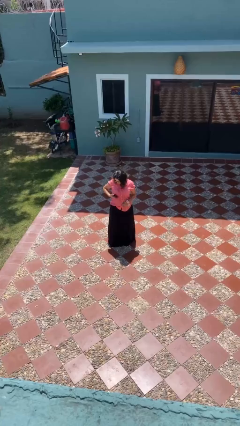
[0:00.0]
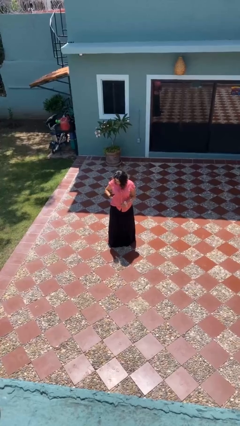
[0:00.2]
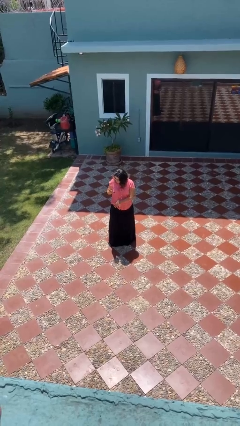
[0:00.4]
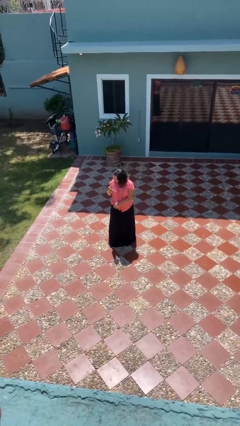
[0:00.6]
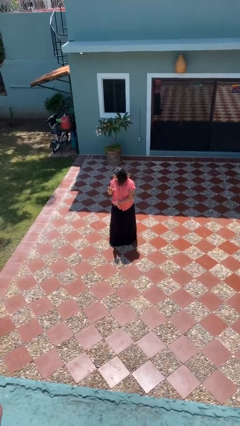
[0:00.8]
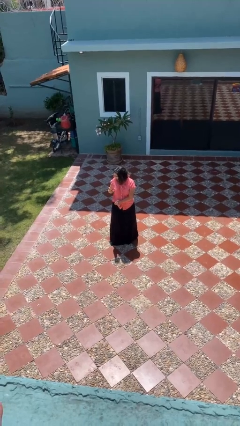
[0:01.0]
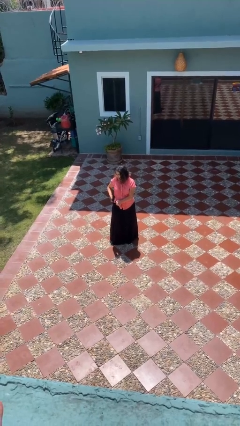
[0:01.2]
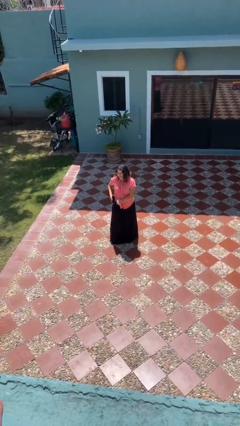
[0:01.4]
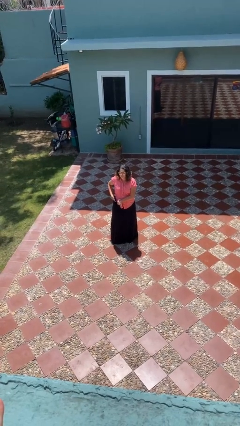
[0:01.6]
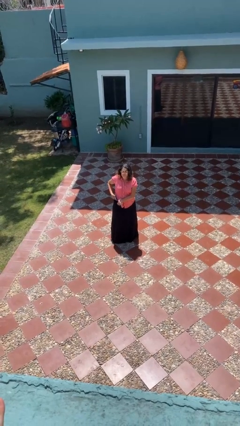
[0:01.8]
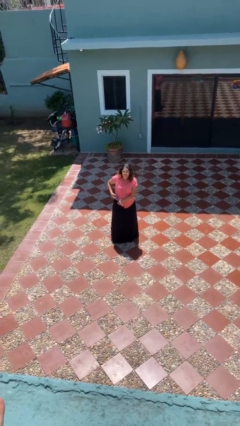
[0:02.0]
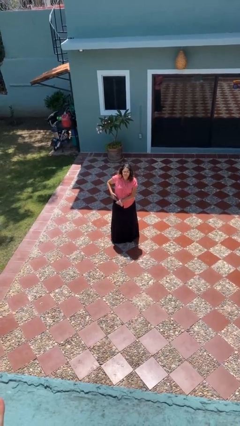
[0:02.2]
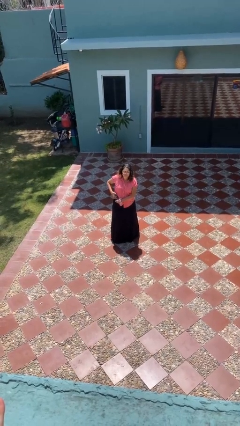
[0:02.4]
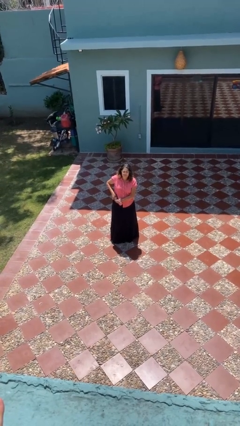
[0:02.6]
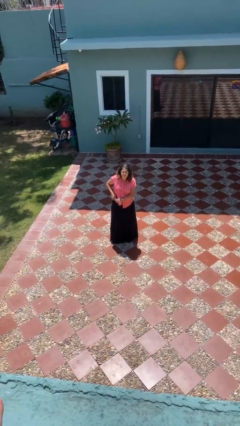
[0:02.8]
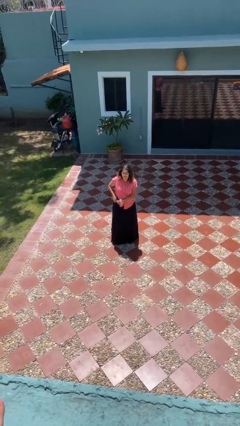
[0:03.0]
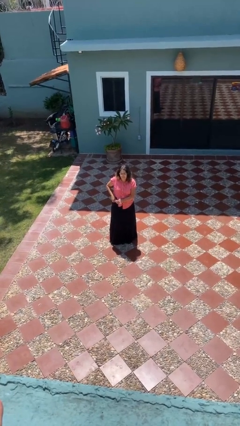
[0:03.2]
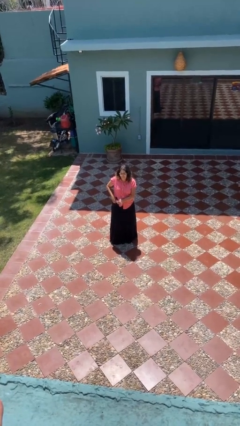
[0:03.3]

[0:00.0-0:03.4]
person puts phone into pocket

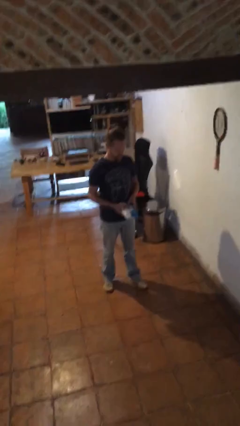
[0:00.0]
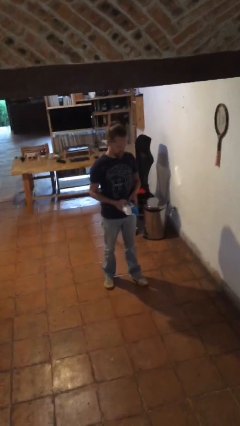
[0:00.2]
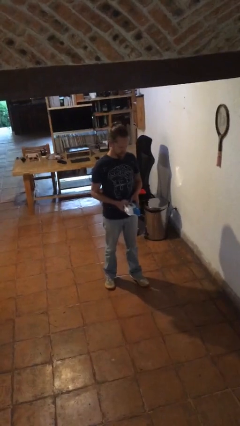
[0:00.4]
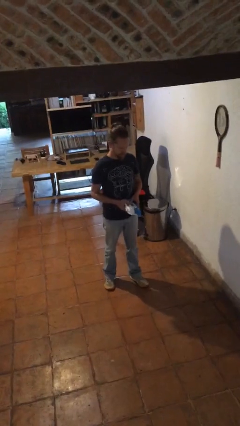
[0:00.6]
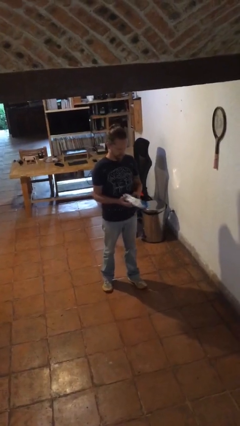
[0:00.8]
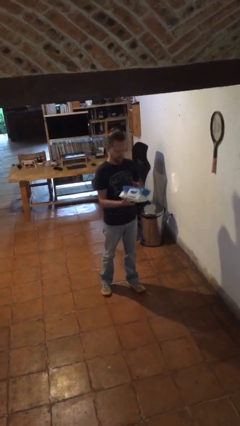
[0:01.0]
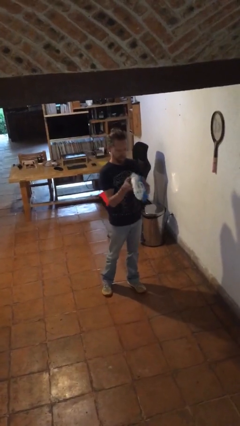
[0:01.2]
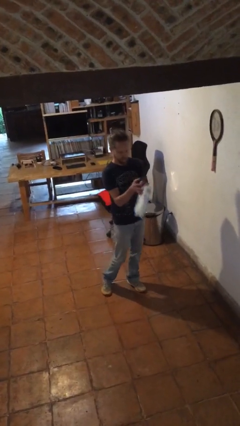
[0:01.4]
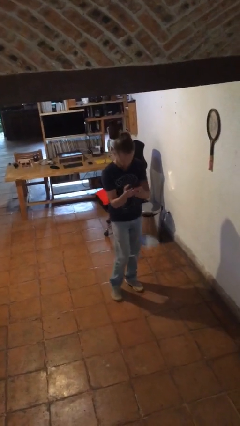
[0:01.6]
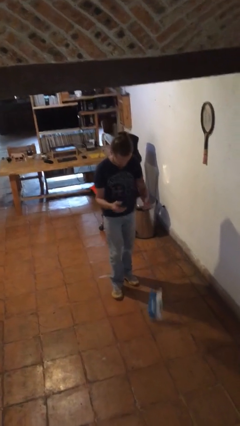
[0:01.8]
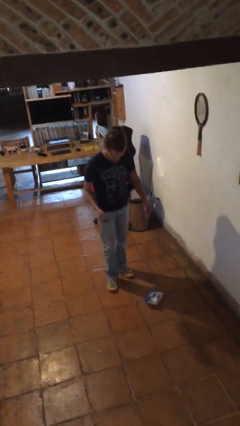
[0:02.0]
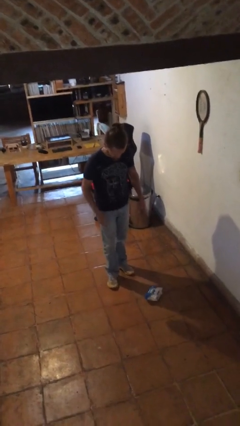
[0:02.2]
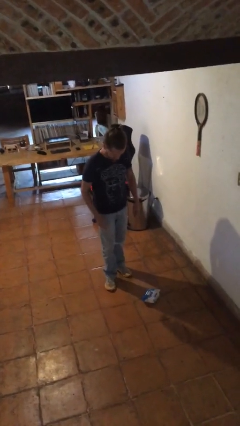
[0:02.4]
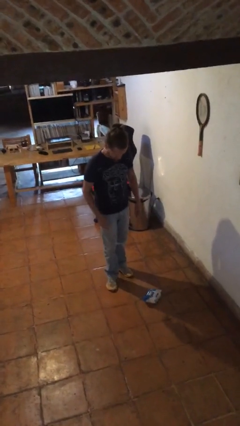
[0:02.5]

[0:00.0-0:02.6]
person drops object

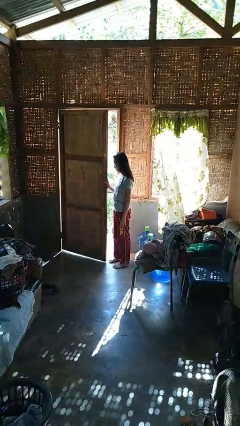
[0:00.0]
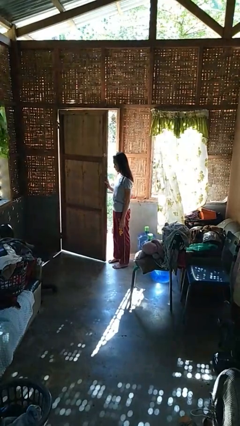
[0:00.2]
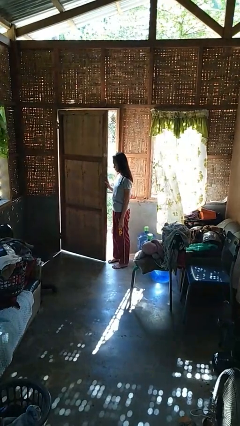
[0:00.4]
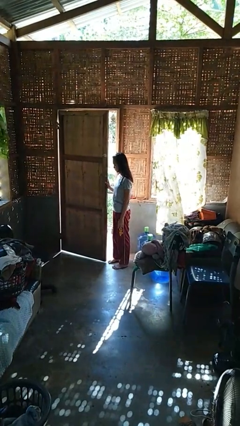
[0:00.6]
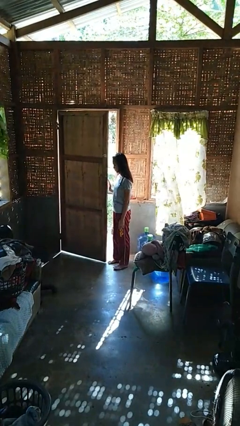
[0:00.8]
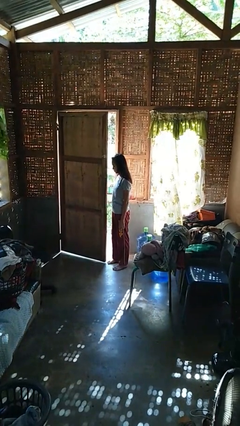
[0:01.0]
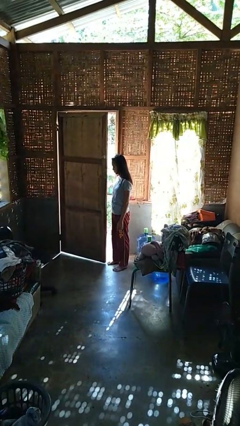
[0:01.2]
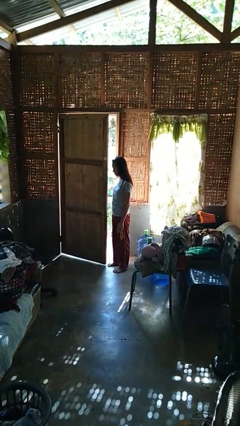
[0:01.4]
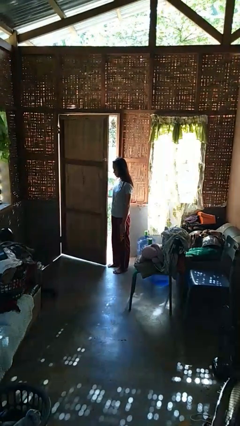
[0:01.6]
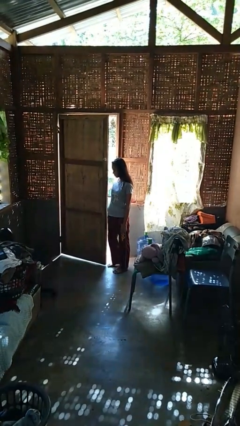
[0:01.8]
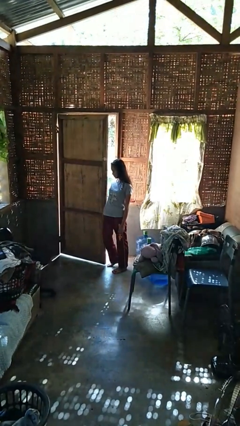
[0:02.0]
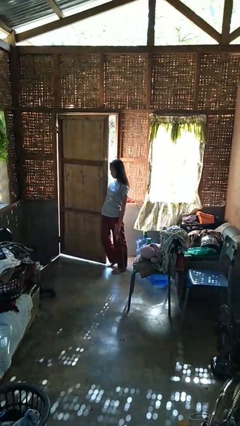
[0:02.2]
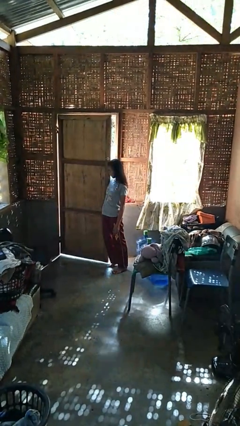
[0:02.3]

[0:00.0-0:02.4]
person opens facility door

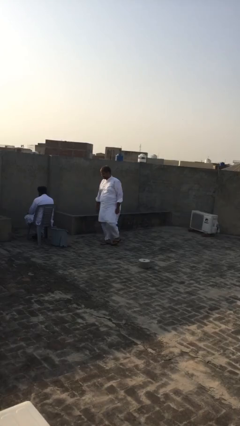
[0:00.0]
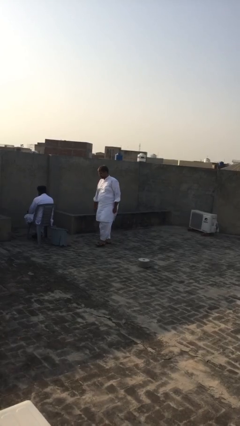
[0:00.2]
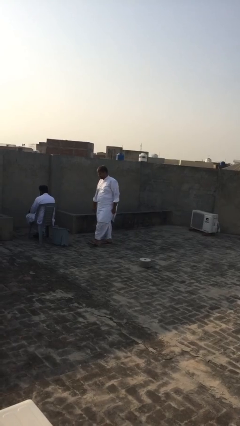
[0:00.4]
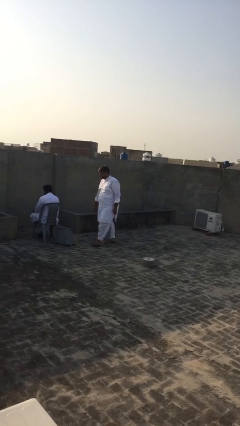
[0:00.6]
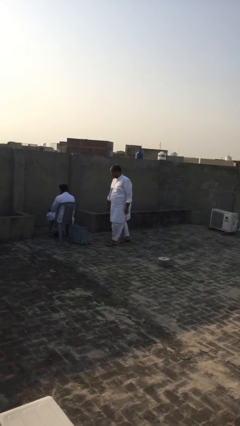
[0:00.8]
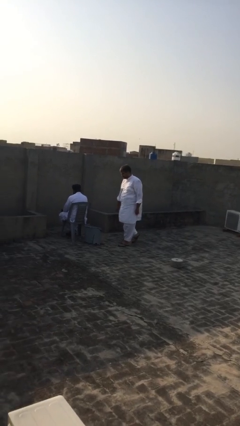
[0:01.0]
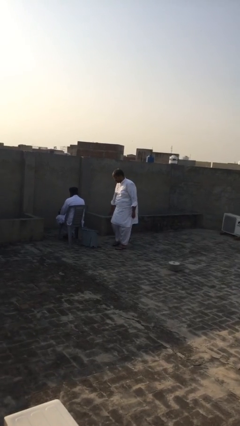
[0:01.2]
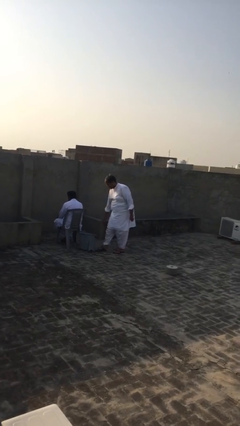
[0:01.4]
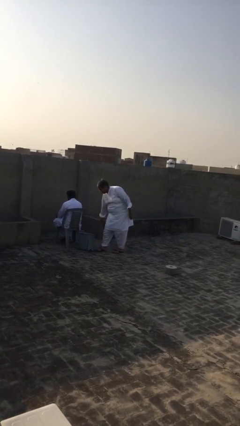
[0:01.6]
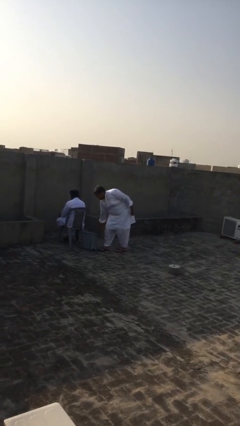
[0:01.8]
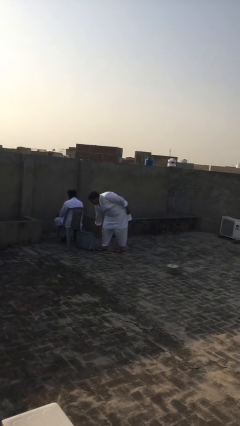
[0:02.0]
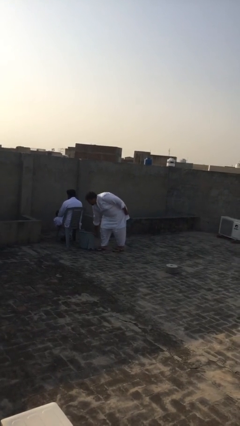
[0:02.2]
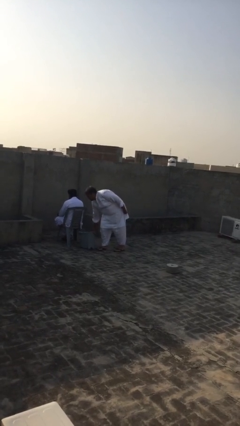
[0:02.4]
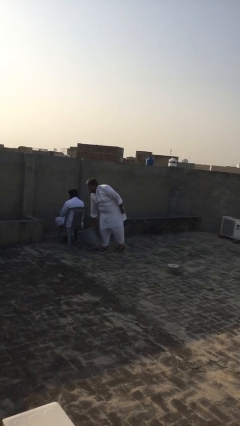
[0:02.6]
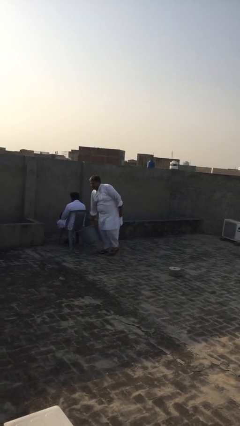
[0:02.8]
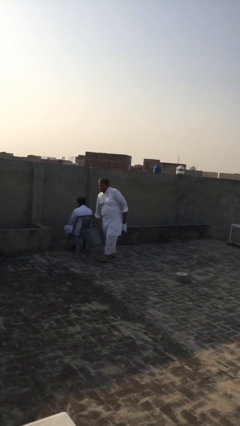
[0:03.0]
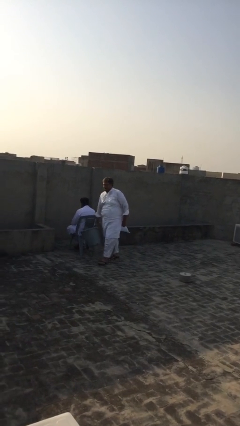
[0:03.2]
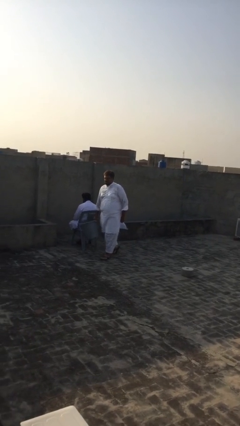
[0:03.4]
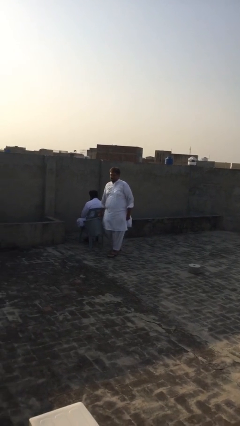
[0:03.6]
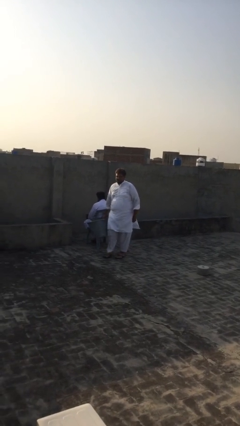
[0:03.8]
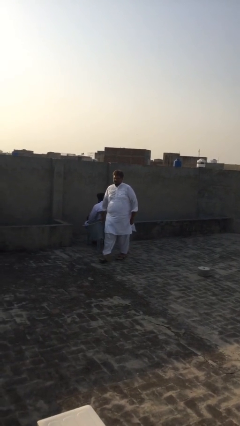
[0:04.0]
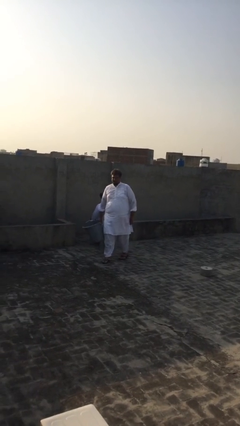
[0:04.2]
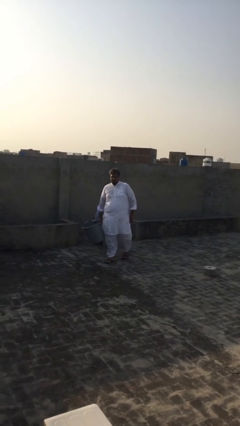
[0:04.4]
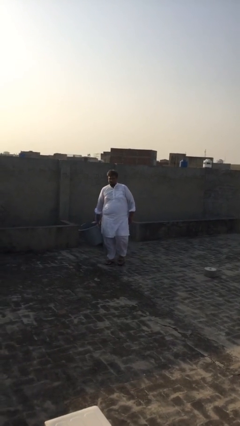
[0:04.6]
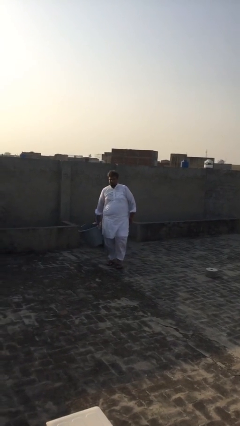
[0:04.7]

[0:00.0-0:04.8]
person steals object from person

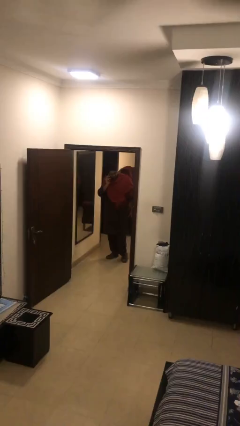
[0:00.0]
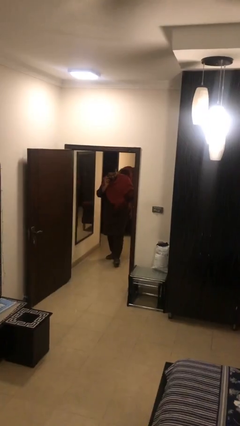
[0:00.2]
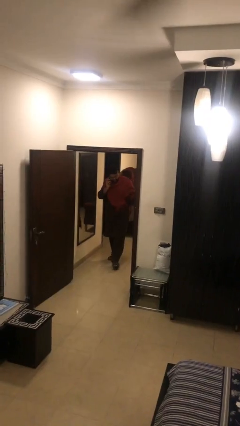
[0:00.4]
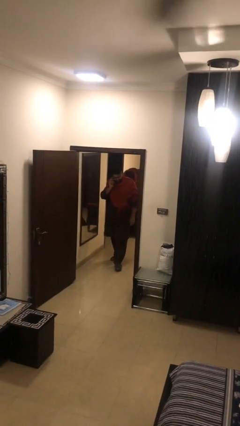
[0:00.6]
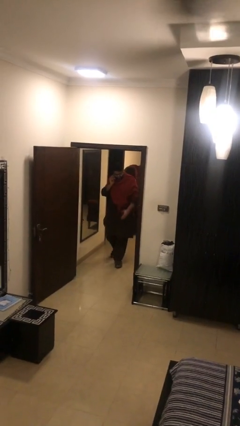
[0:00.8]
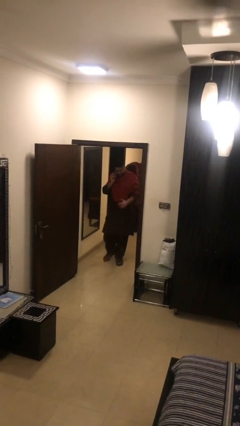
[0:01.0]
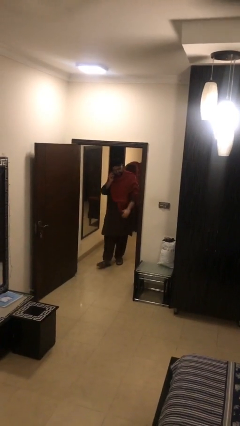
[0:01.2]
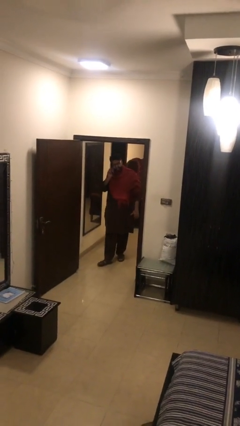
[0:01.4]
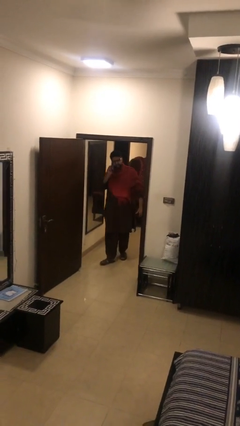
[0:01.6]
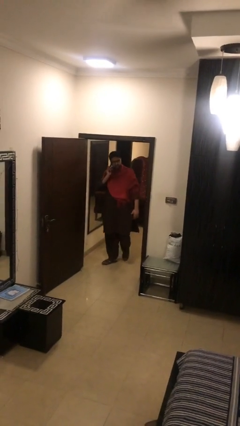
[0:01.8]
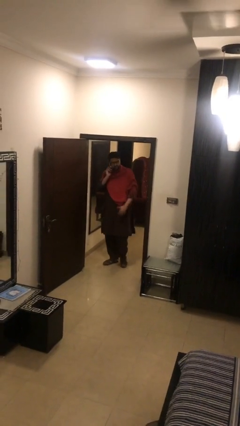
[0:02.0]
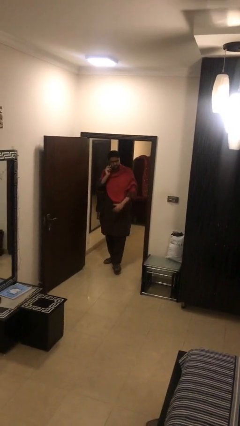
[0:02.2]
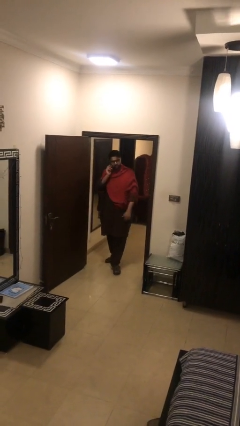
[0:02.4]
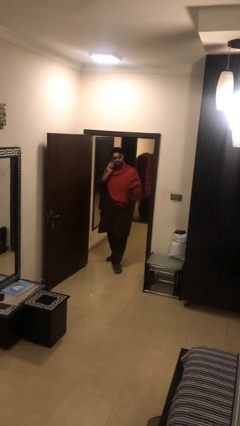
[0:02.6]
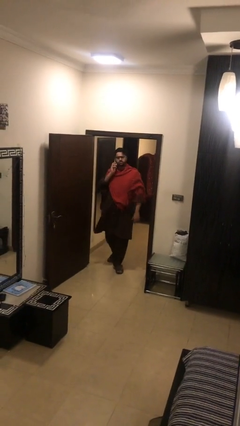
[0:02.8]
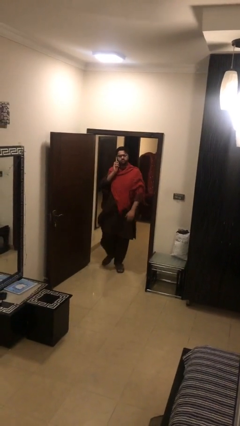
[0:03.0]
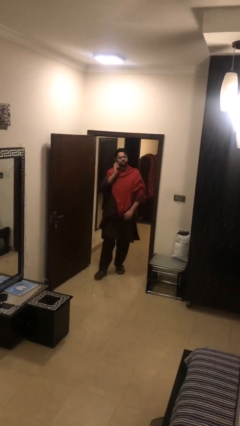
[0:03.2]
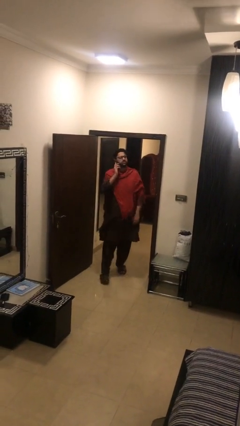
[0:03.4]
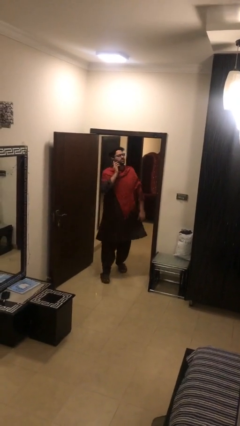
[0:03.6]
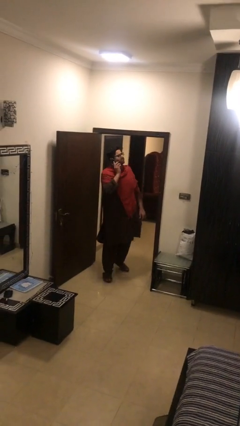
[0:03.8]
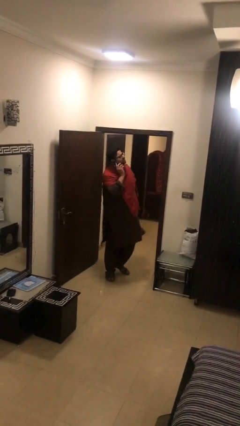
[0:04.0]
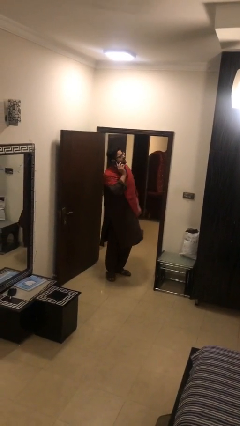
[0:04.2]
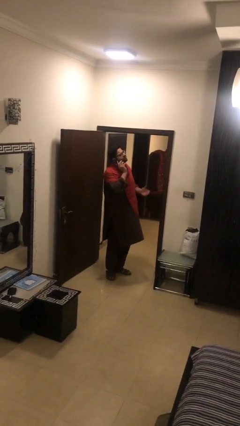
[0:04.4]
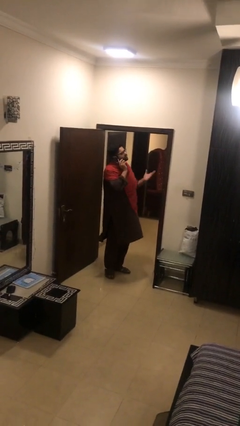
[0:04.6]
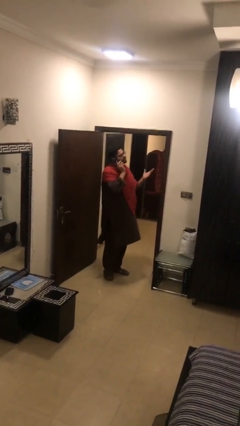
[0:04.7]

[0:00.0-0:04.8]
person enters scene through structure
